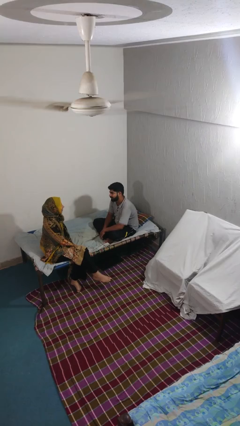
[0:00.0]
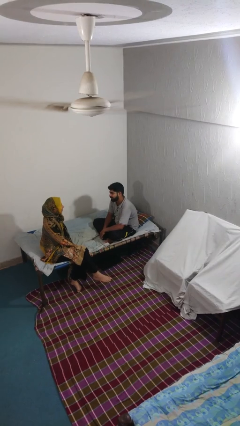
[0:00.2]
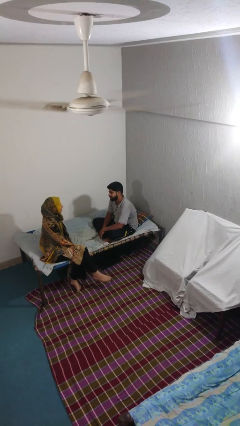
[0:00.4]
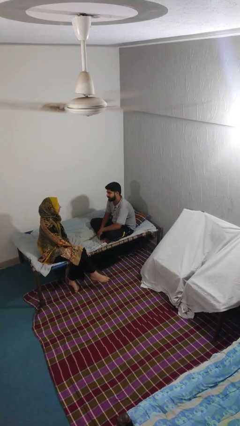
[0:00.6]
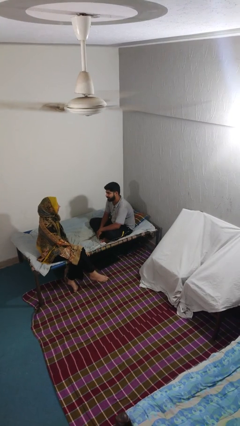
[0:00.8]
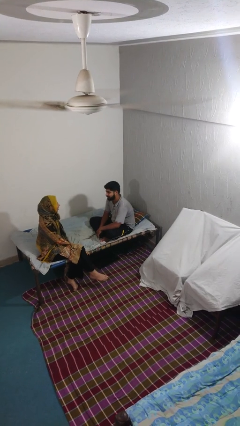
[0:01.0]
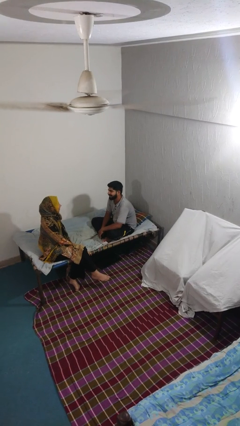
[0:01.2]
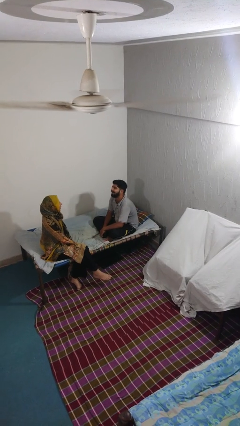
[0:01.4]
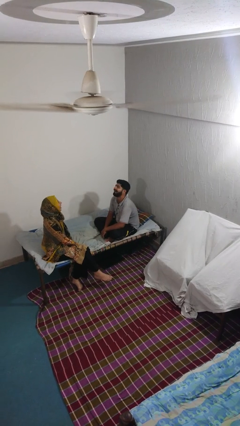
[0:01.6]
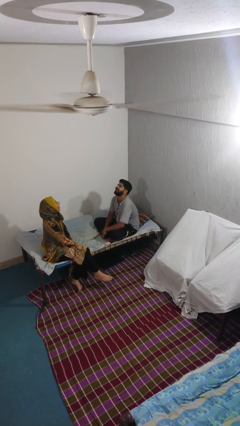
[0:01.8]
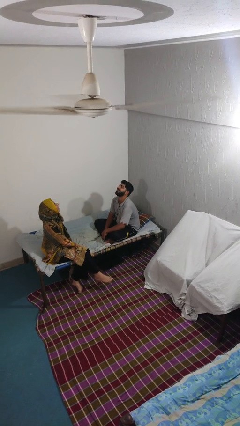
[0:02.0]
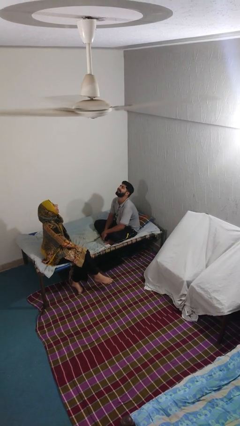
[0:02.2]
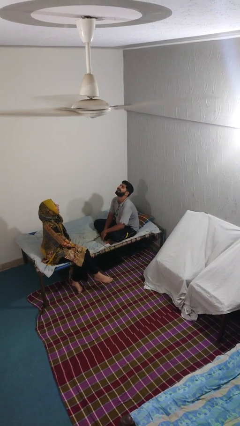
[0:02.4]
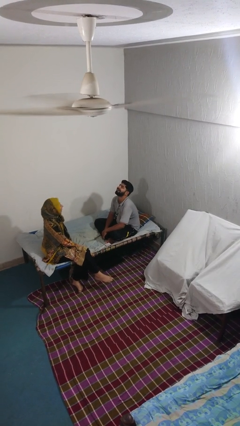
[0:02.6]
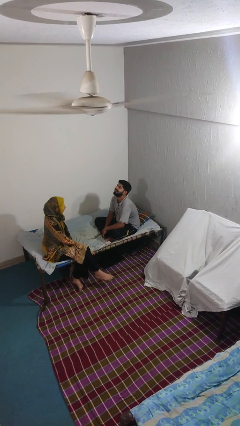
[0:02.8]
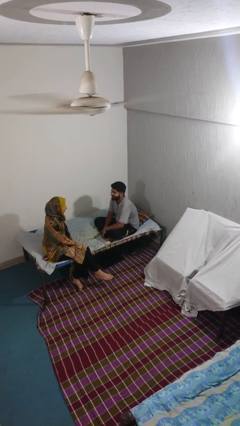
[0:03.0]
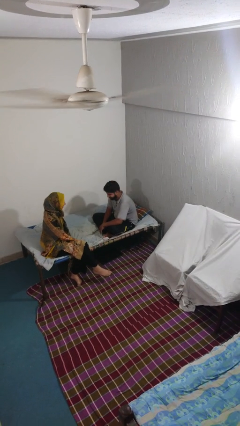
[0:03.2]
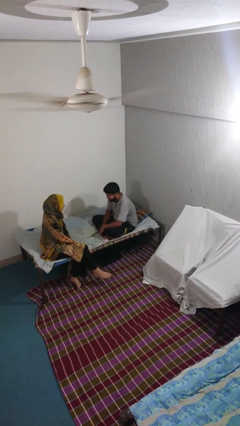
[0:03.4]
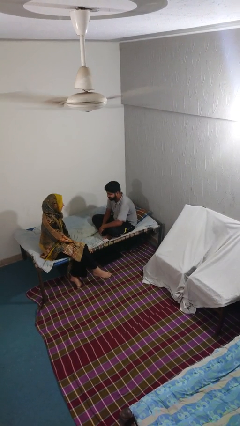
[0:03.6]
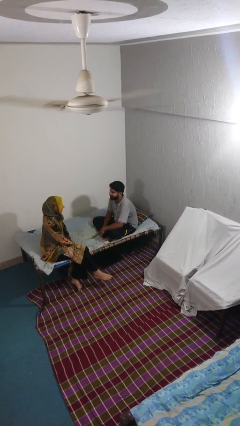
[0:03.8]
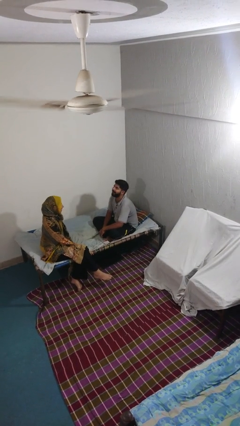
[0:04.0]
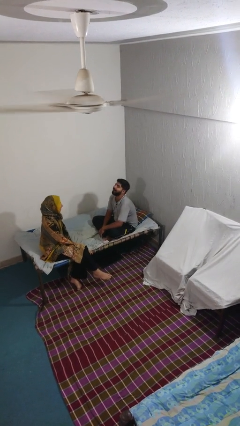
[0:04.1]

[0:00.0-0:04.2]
person laughs with person

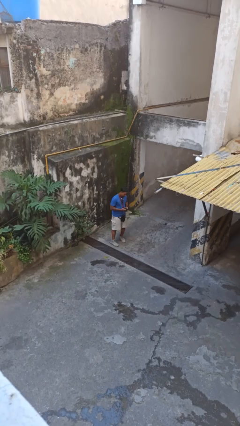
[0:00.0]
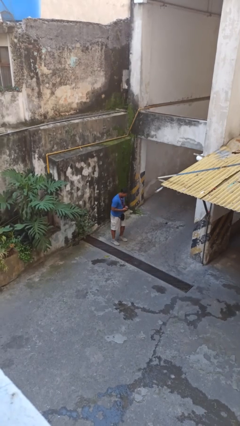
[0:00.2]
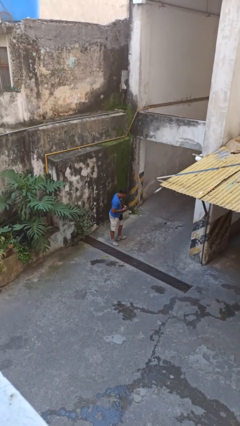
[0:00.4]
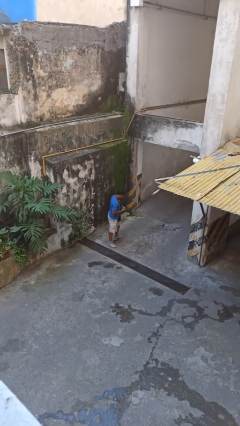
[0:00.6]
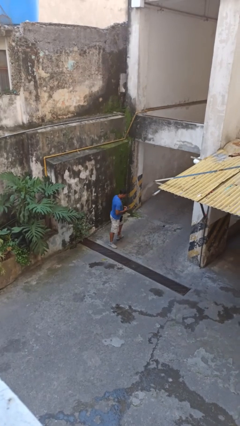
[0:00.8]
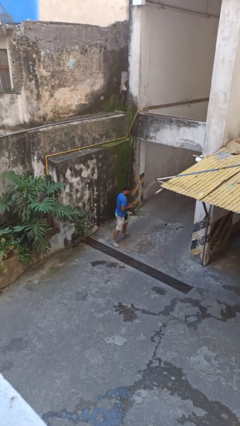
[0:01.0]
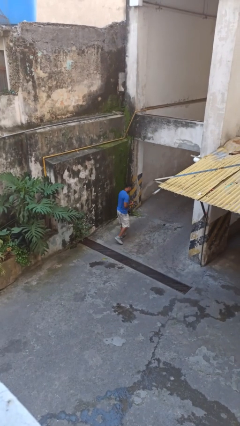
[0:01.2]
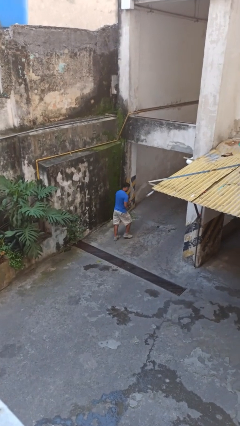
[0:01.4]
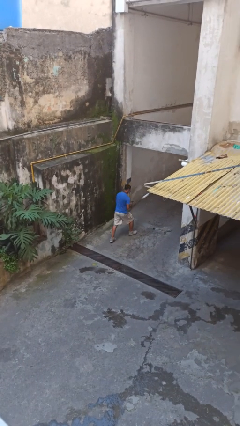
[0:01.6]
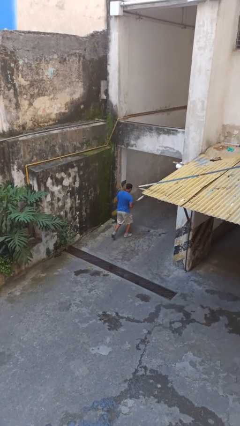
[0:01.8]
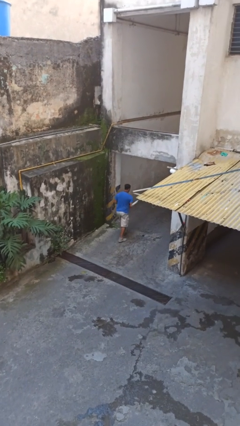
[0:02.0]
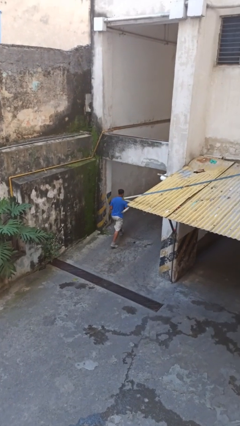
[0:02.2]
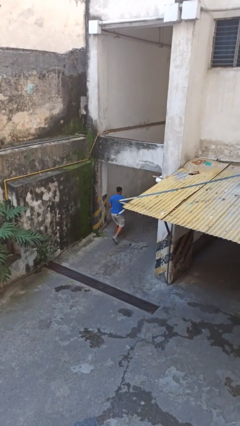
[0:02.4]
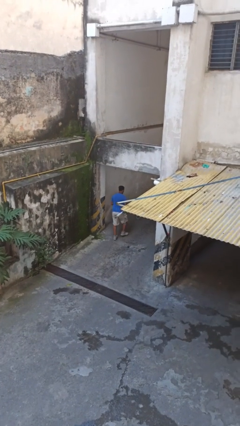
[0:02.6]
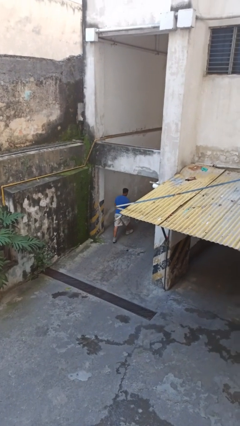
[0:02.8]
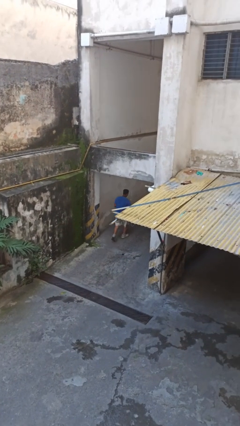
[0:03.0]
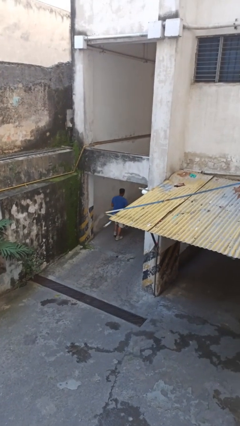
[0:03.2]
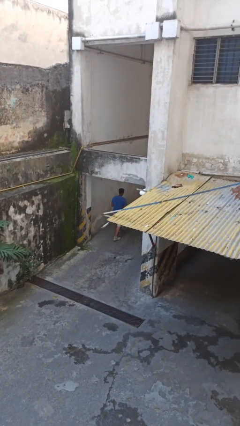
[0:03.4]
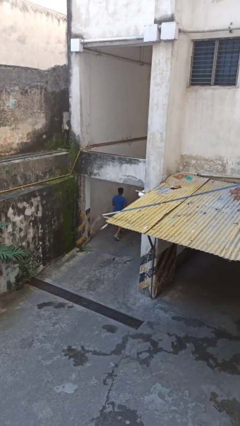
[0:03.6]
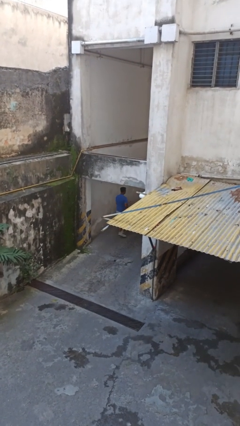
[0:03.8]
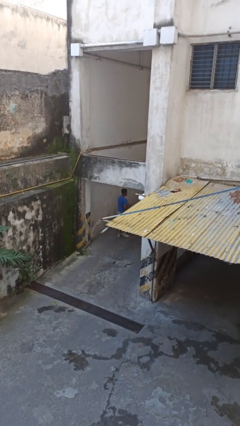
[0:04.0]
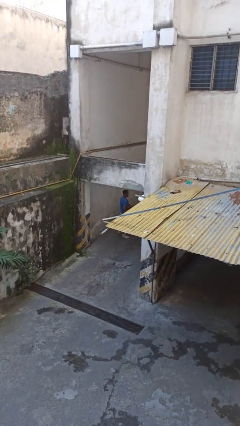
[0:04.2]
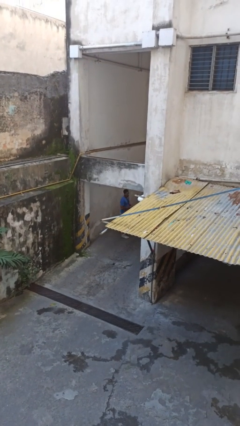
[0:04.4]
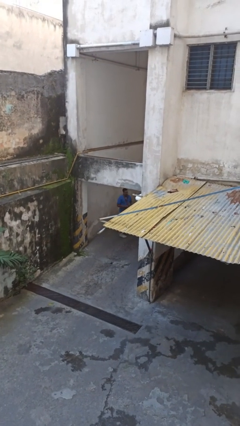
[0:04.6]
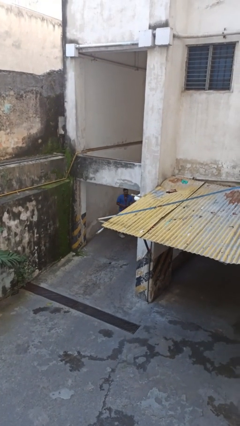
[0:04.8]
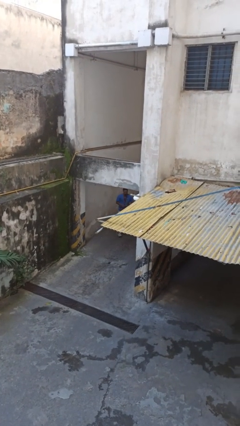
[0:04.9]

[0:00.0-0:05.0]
person exits scene through structure

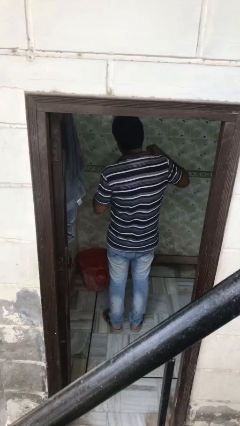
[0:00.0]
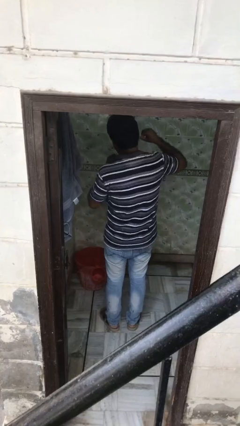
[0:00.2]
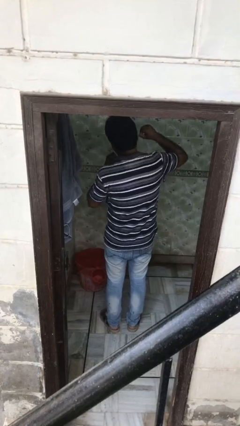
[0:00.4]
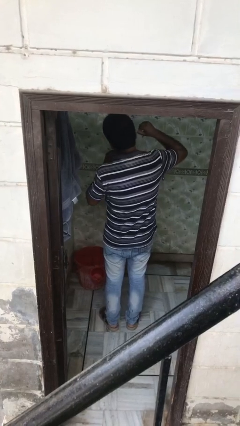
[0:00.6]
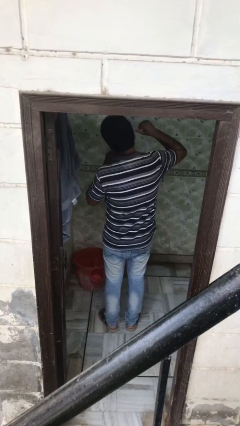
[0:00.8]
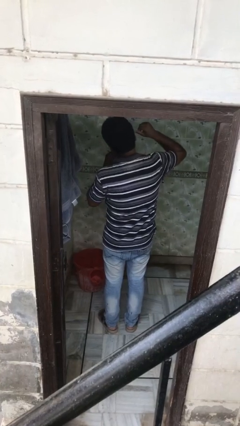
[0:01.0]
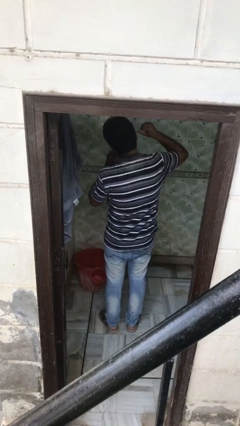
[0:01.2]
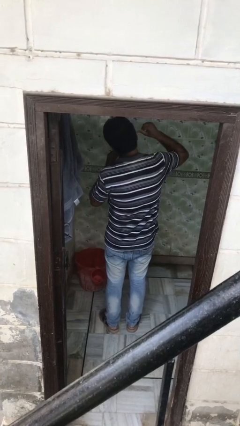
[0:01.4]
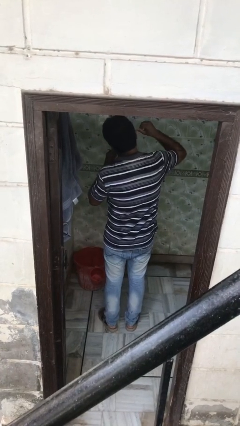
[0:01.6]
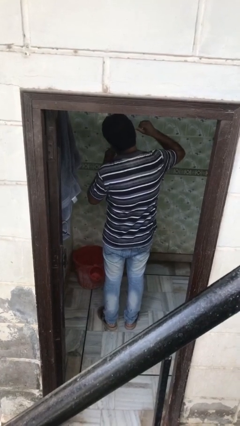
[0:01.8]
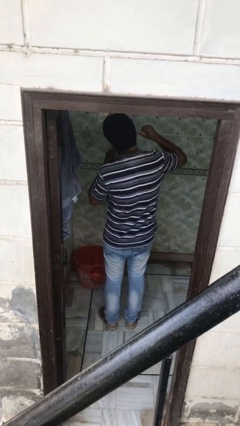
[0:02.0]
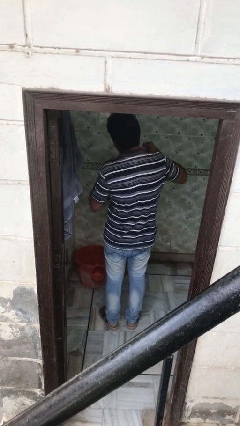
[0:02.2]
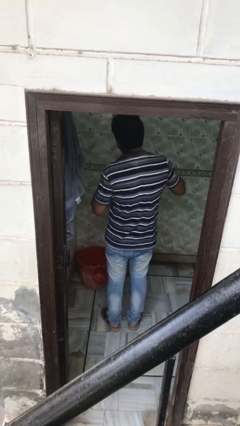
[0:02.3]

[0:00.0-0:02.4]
person flosses

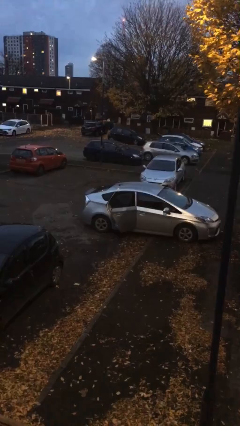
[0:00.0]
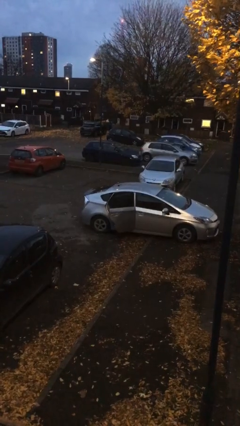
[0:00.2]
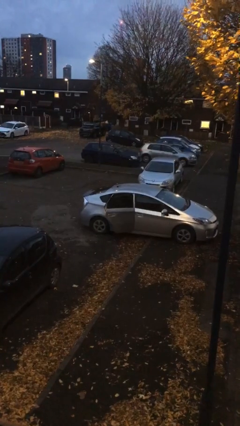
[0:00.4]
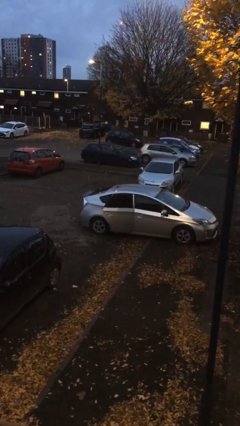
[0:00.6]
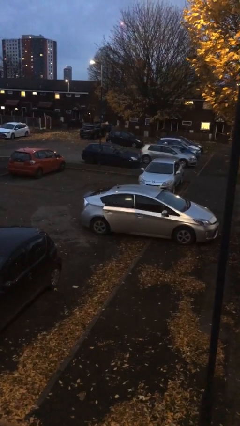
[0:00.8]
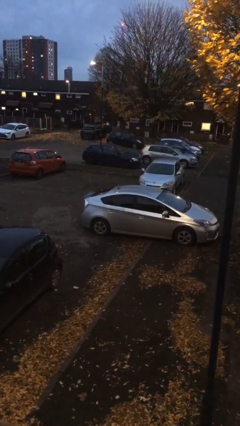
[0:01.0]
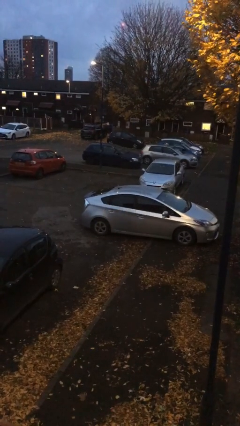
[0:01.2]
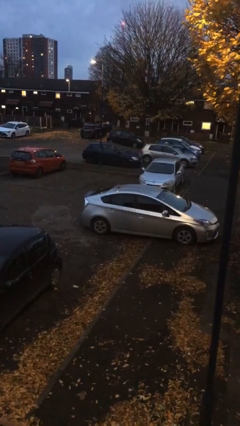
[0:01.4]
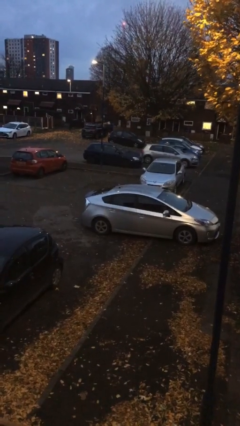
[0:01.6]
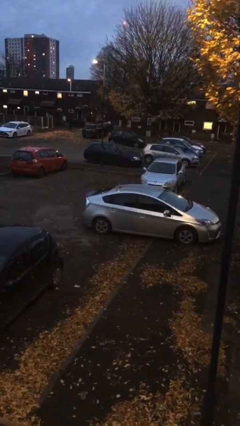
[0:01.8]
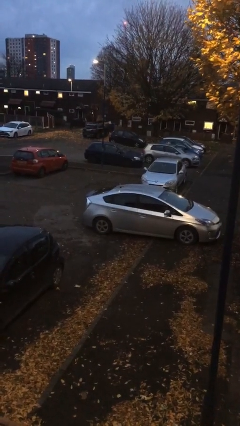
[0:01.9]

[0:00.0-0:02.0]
person closes car door

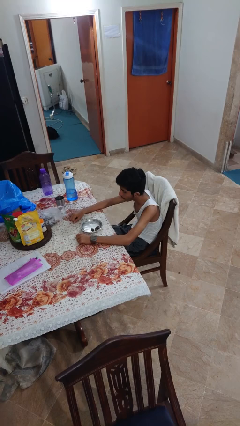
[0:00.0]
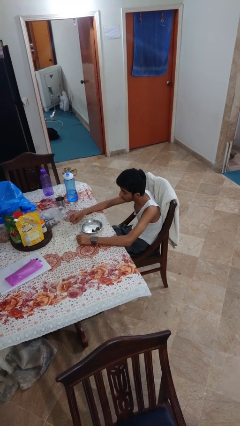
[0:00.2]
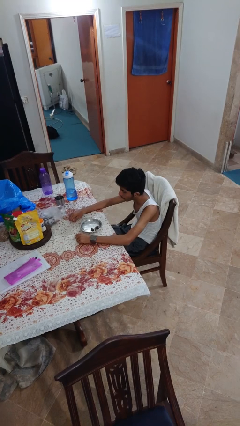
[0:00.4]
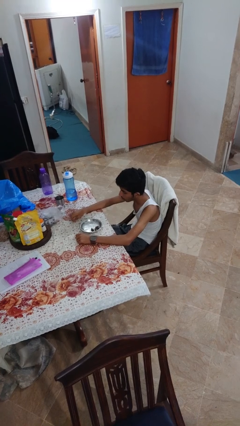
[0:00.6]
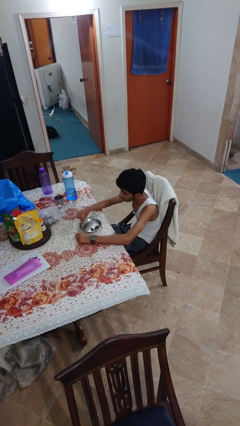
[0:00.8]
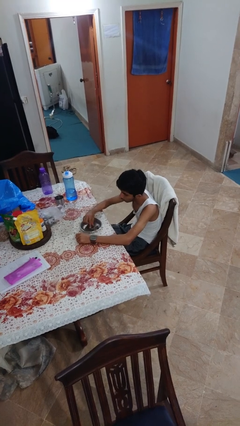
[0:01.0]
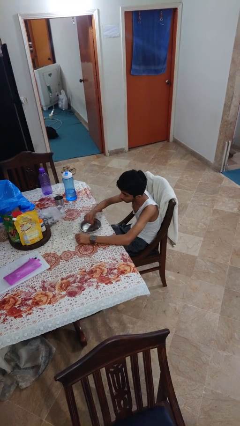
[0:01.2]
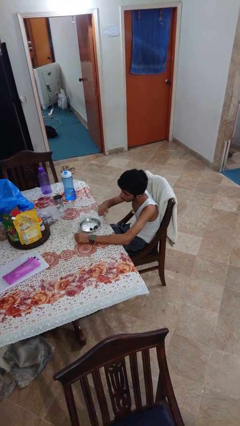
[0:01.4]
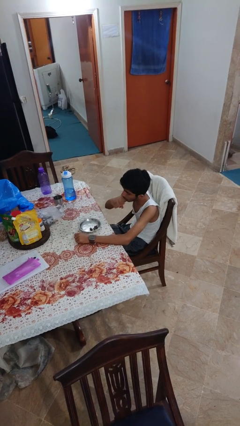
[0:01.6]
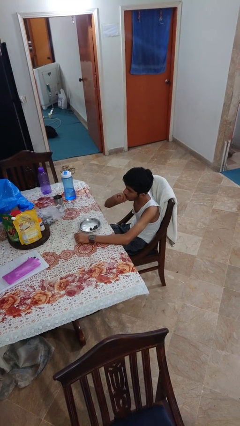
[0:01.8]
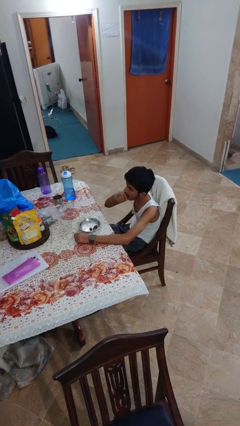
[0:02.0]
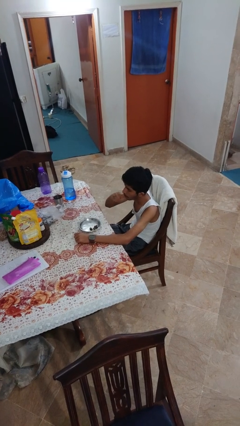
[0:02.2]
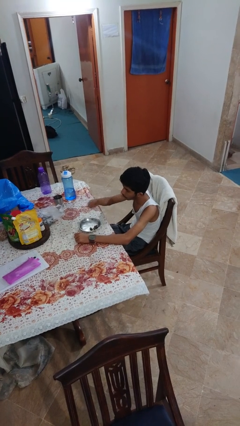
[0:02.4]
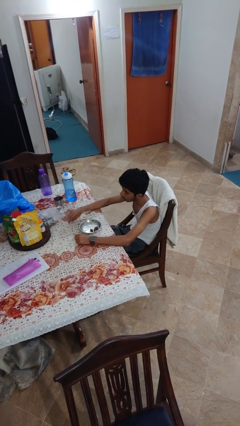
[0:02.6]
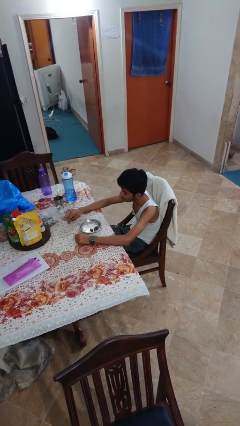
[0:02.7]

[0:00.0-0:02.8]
person eats with hands

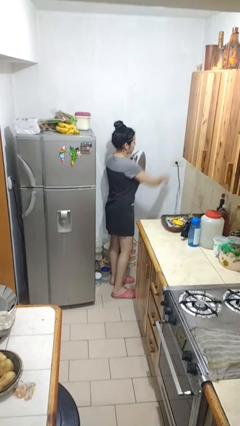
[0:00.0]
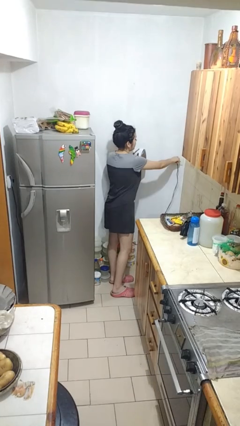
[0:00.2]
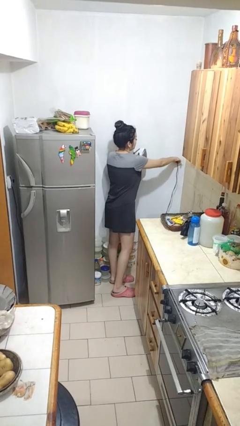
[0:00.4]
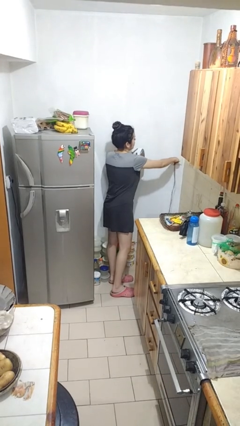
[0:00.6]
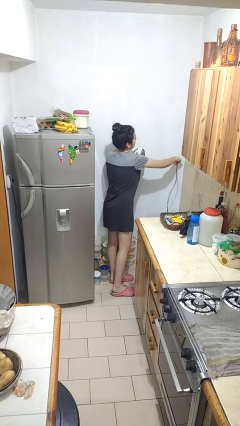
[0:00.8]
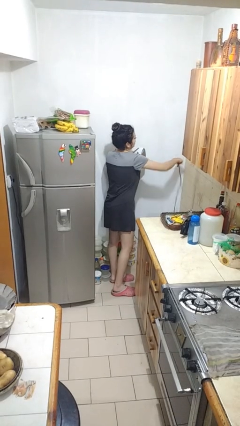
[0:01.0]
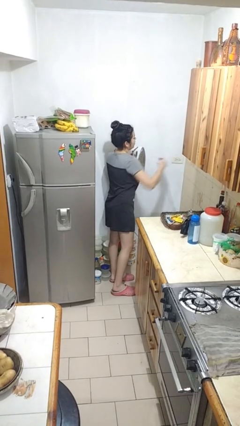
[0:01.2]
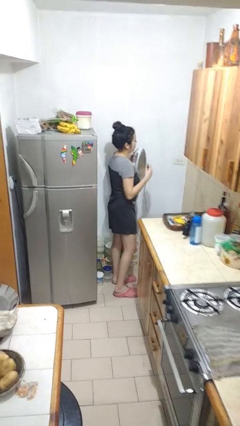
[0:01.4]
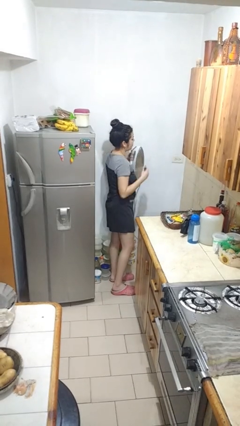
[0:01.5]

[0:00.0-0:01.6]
person unplugs from electrical socket
